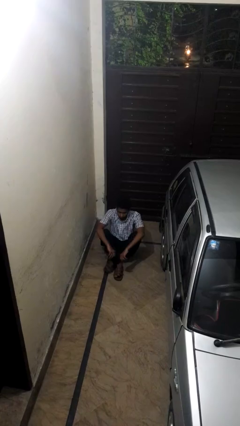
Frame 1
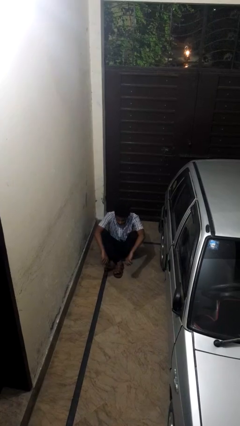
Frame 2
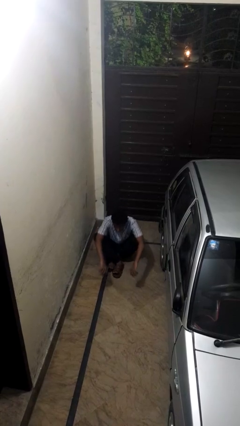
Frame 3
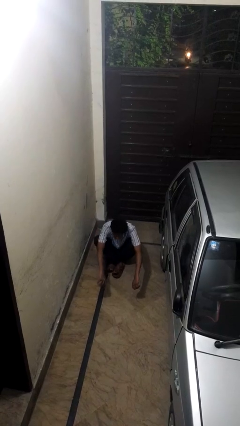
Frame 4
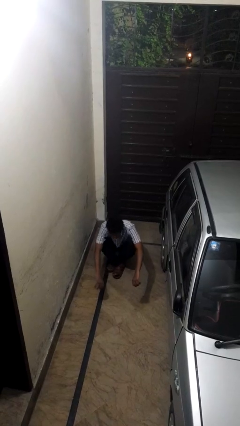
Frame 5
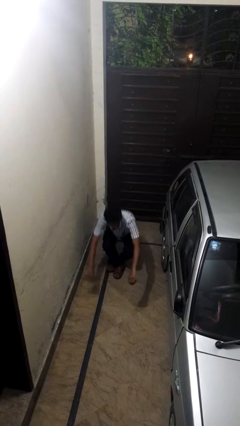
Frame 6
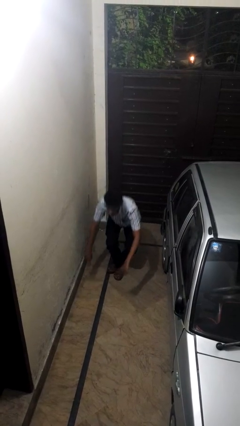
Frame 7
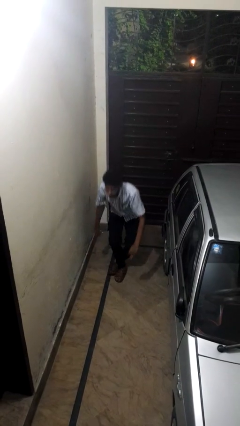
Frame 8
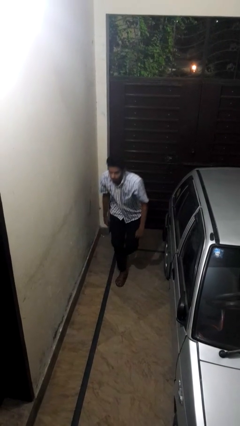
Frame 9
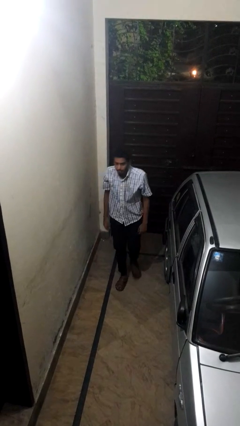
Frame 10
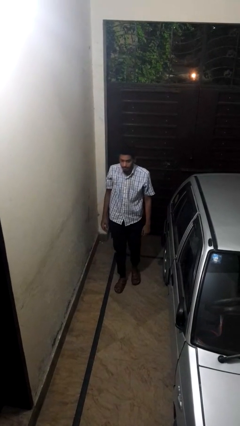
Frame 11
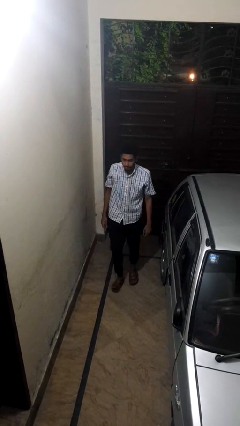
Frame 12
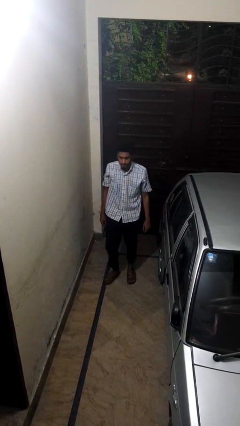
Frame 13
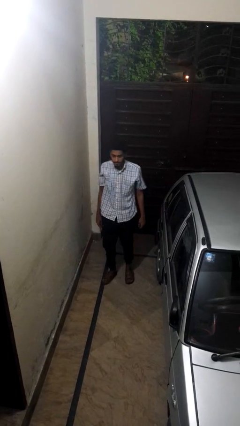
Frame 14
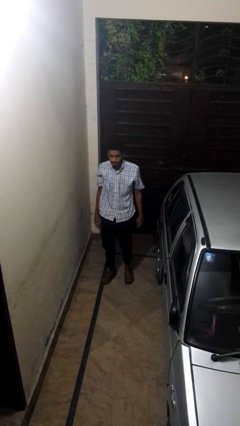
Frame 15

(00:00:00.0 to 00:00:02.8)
person stands up from floor

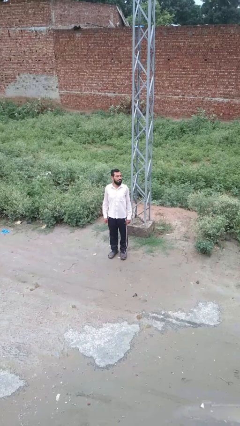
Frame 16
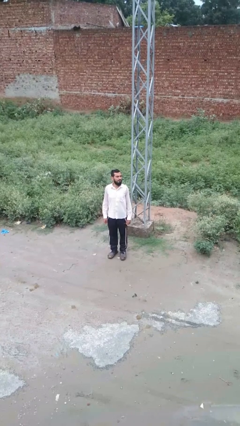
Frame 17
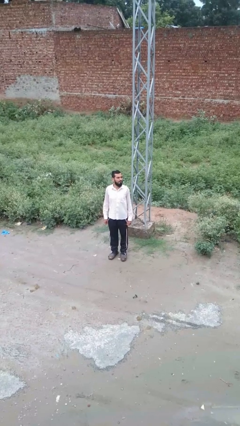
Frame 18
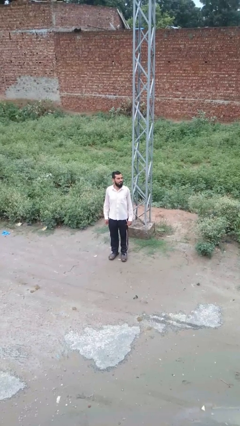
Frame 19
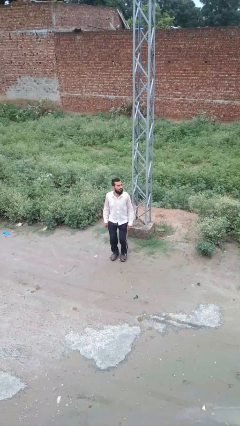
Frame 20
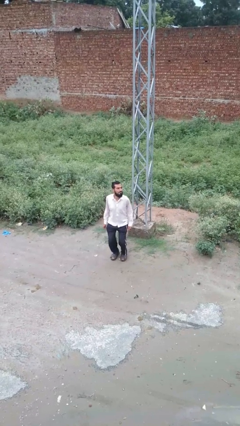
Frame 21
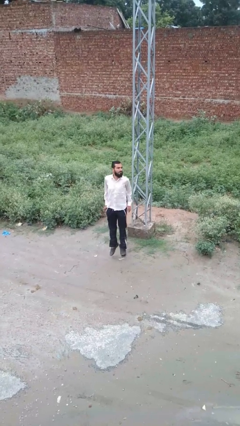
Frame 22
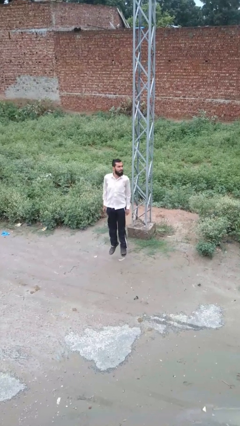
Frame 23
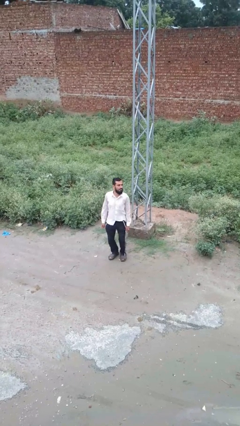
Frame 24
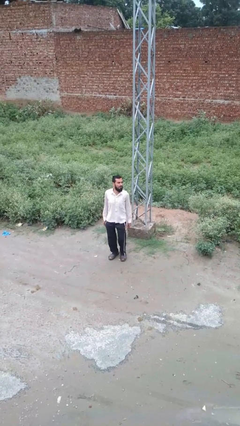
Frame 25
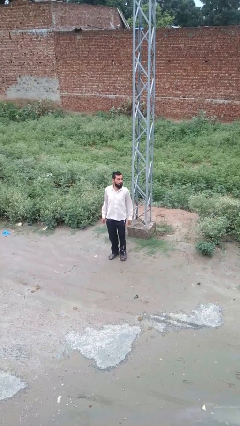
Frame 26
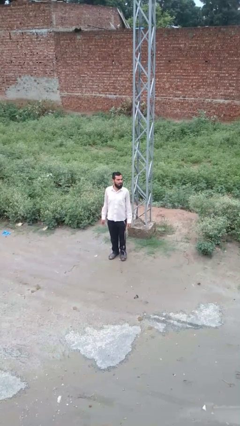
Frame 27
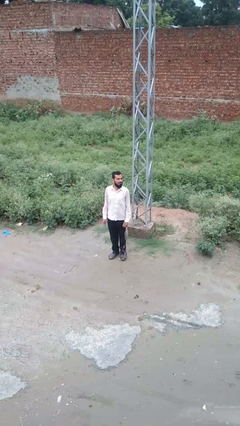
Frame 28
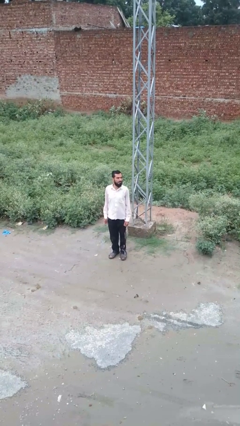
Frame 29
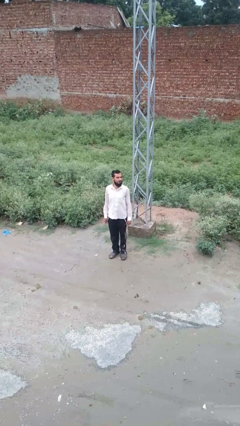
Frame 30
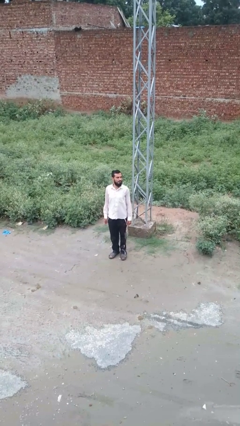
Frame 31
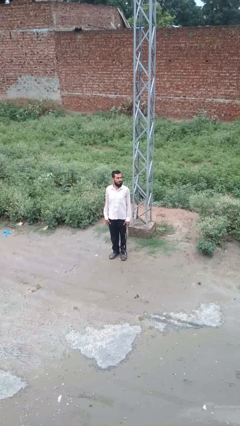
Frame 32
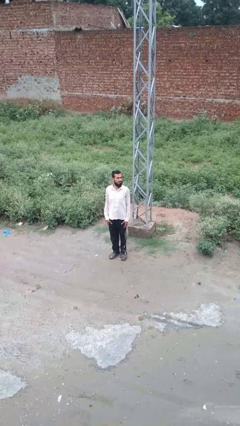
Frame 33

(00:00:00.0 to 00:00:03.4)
person jumps

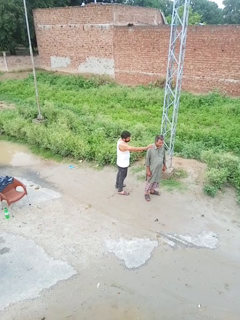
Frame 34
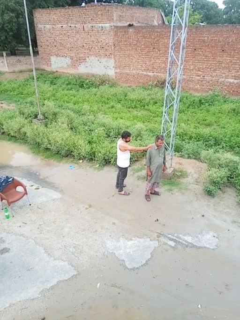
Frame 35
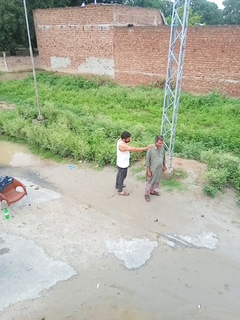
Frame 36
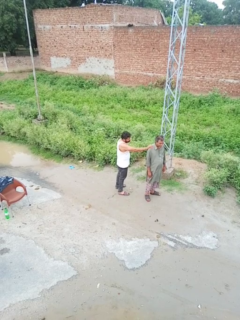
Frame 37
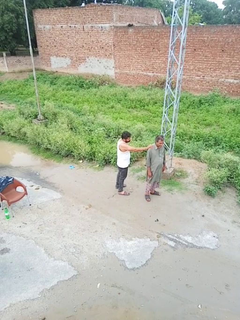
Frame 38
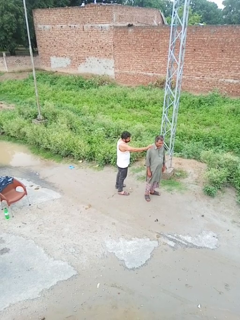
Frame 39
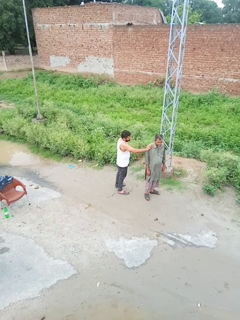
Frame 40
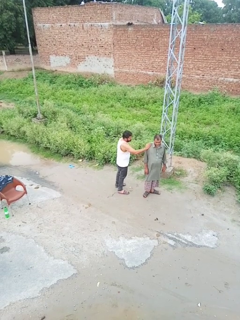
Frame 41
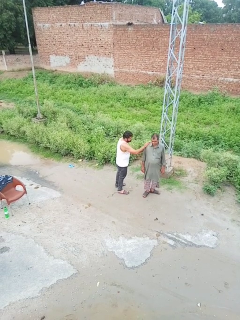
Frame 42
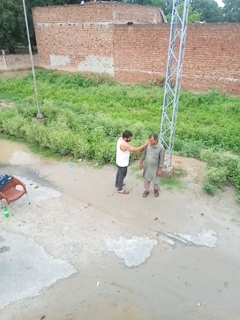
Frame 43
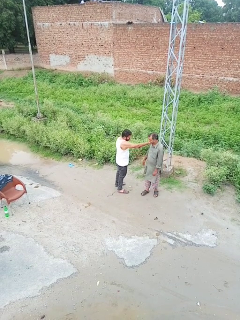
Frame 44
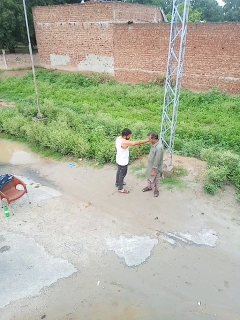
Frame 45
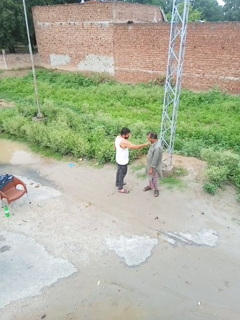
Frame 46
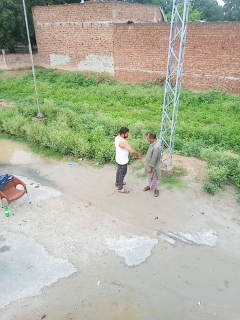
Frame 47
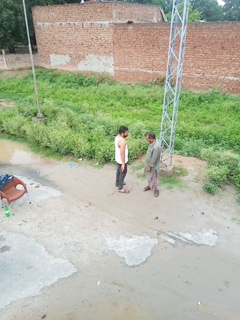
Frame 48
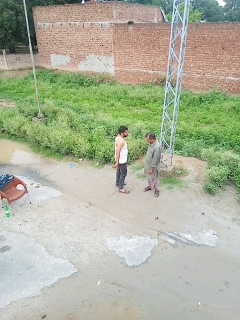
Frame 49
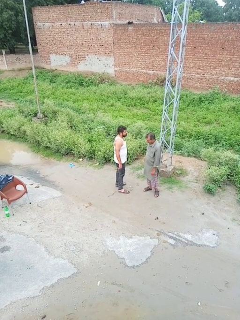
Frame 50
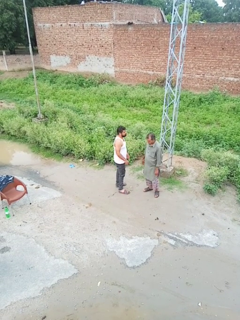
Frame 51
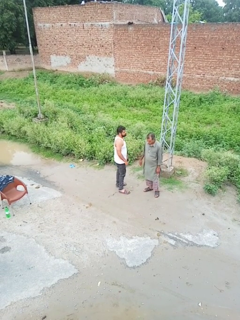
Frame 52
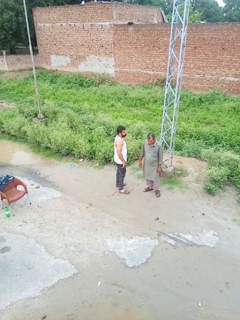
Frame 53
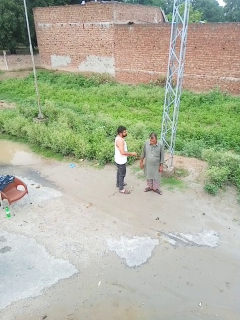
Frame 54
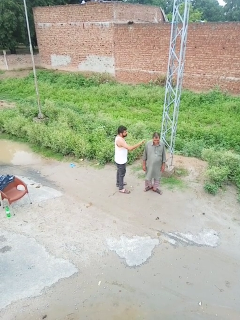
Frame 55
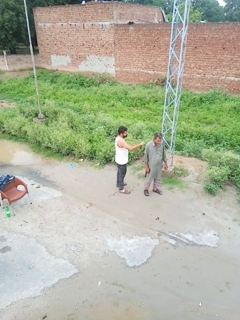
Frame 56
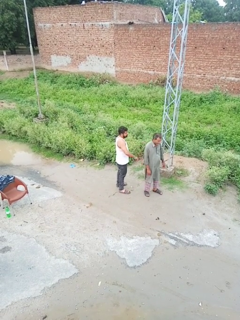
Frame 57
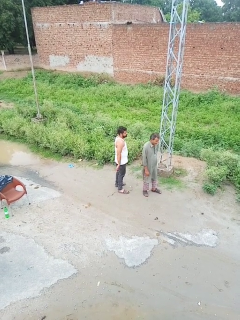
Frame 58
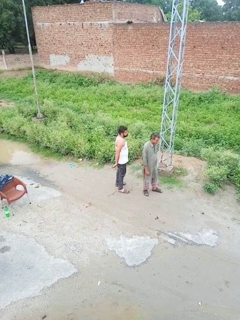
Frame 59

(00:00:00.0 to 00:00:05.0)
person spins person around

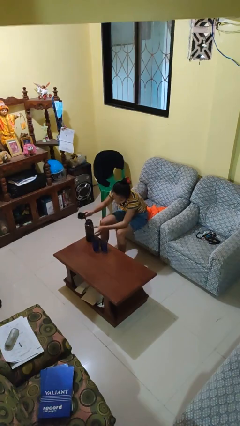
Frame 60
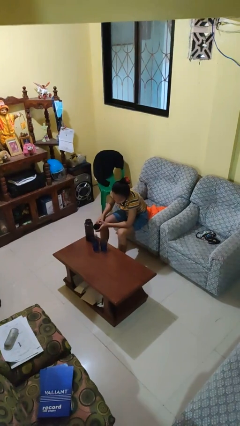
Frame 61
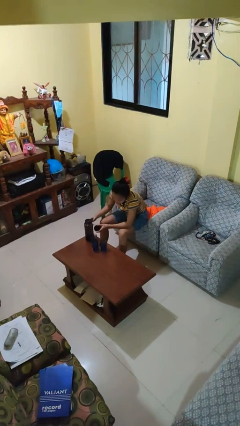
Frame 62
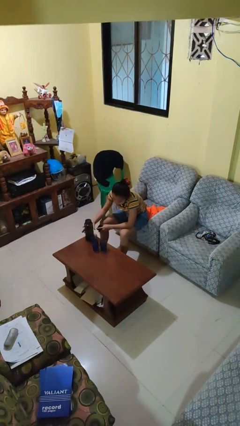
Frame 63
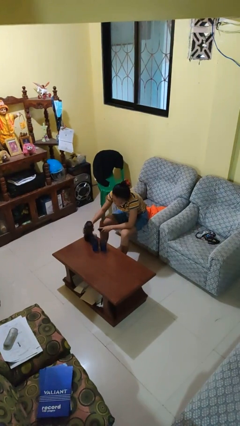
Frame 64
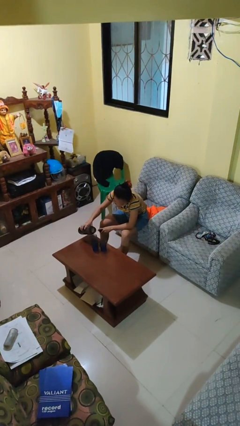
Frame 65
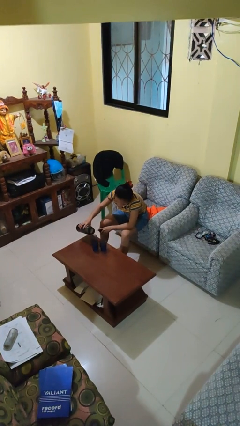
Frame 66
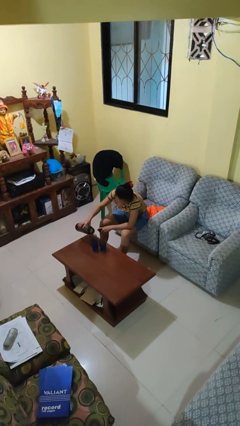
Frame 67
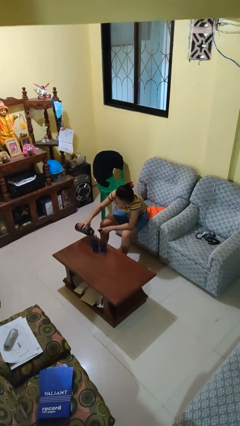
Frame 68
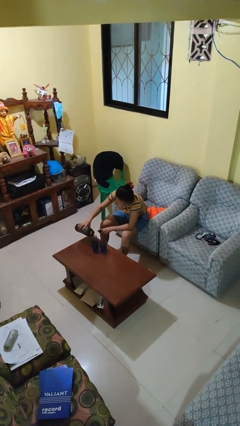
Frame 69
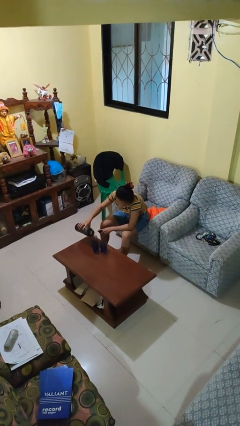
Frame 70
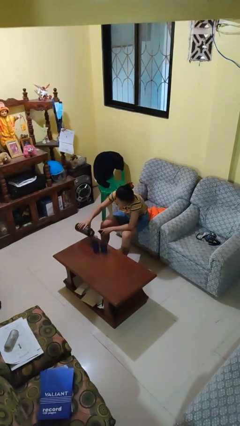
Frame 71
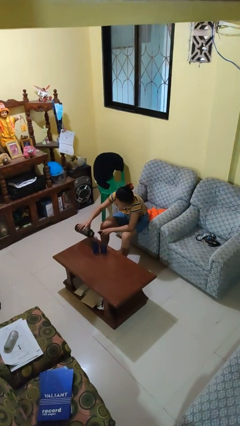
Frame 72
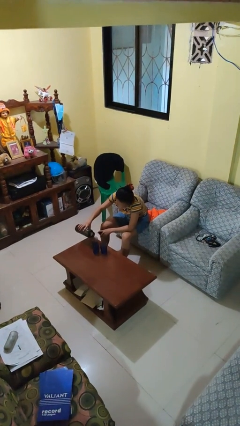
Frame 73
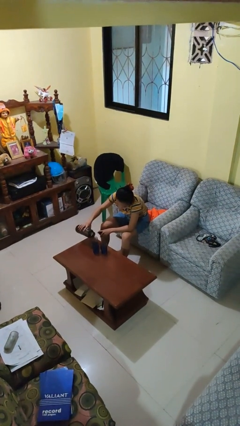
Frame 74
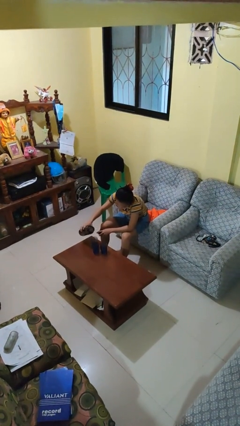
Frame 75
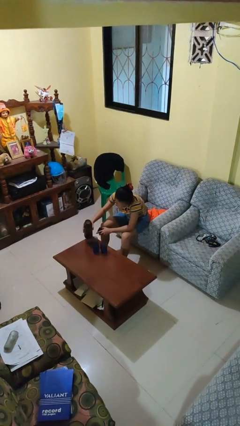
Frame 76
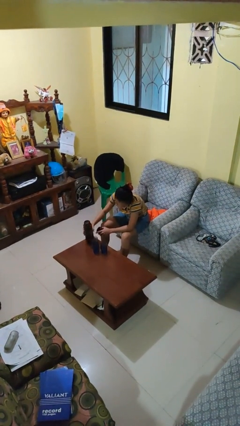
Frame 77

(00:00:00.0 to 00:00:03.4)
person pours liquid into cup

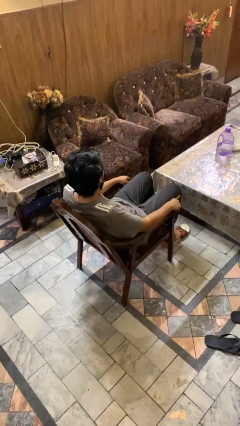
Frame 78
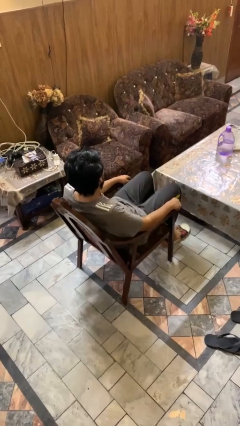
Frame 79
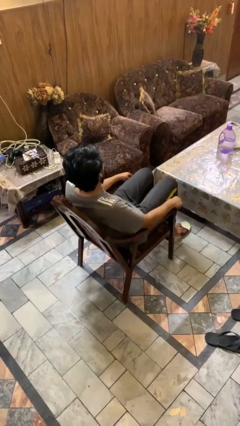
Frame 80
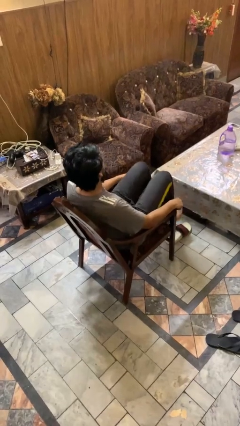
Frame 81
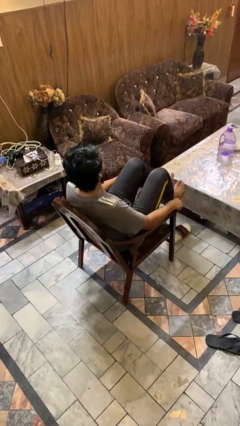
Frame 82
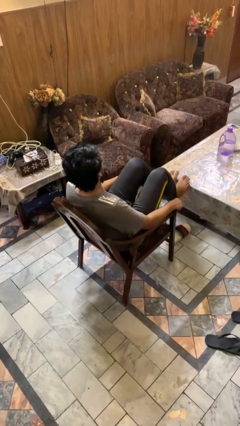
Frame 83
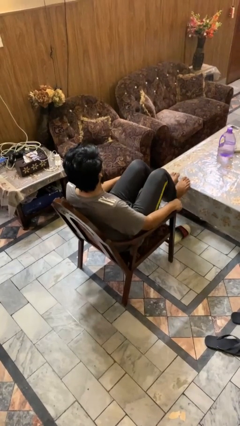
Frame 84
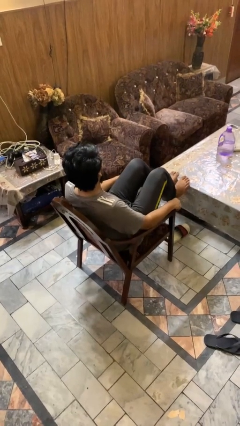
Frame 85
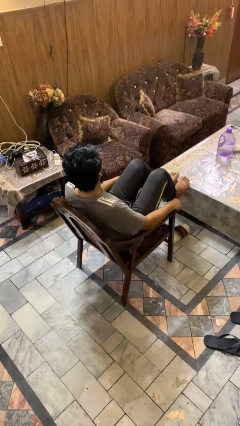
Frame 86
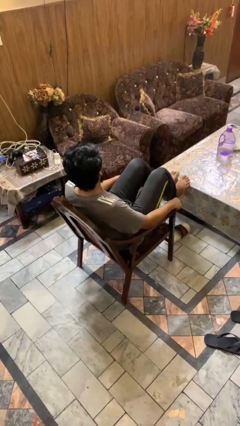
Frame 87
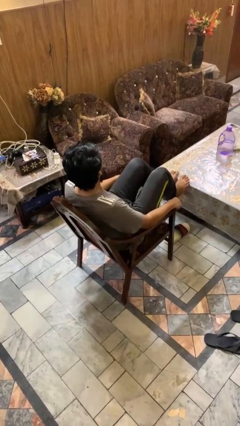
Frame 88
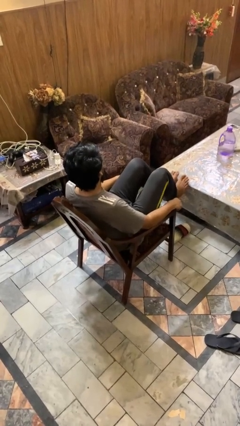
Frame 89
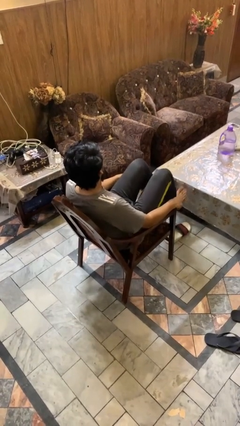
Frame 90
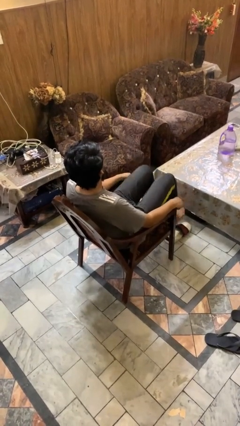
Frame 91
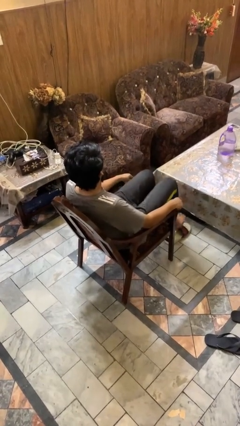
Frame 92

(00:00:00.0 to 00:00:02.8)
person puts feet up

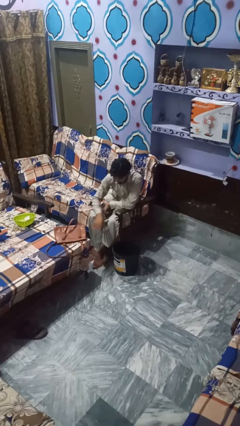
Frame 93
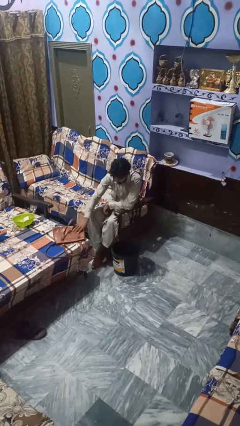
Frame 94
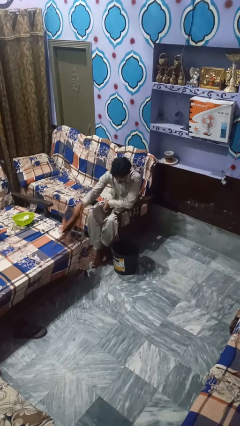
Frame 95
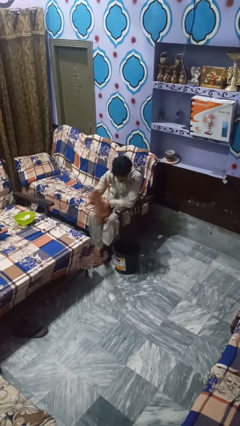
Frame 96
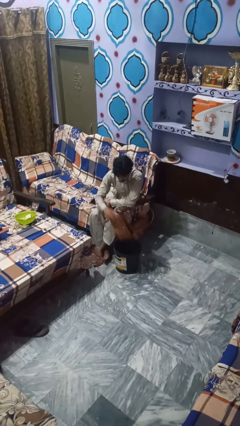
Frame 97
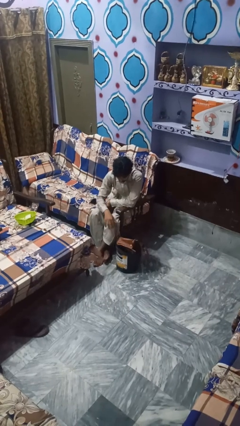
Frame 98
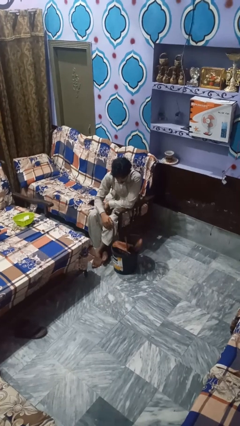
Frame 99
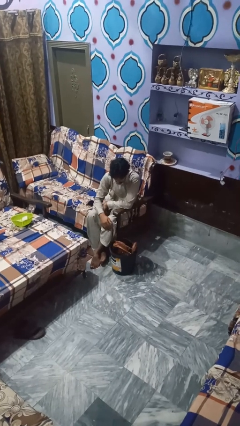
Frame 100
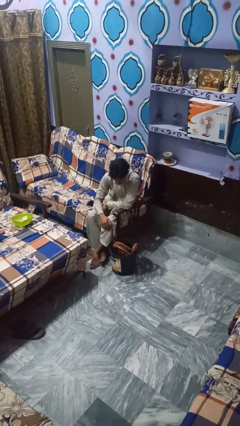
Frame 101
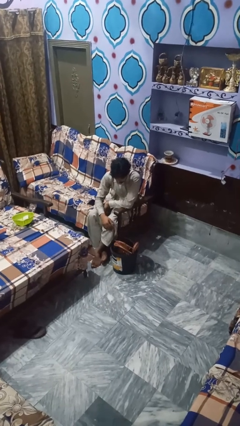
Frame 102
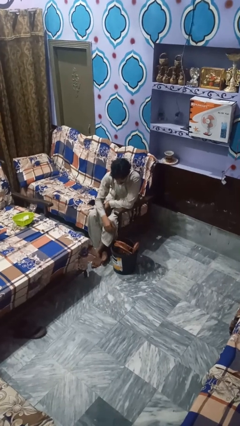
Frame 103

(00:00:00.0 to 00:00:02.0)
person puts object into basket
